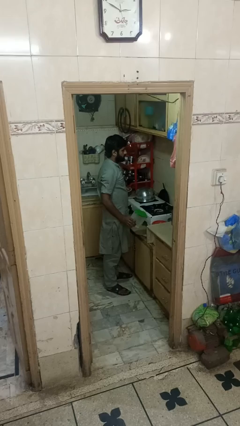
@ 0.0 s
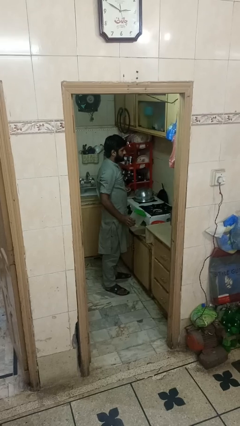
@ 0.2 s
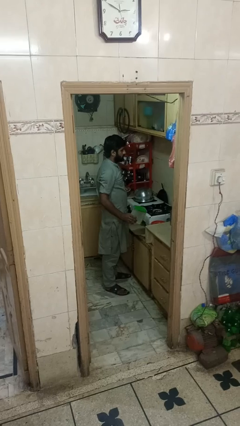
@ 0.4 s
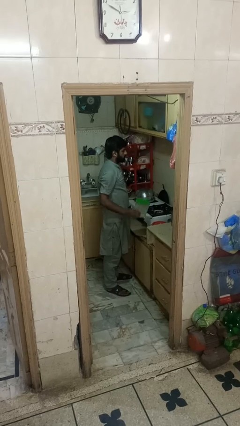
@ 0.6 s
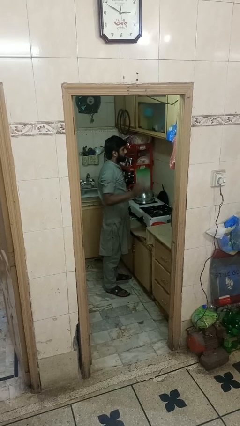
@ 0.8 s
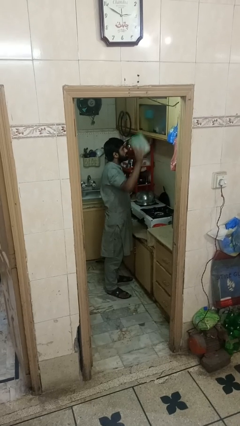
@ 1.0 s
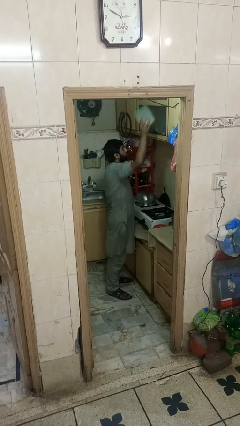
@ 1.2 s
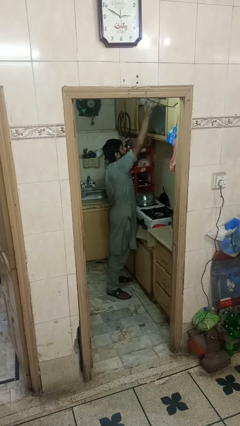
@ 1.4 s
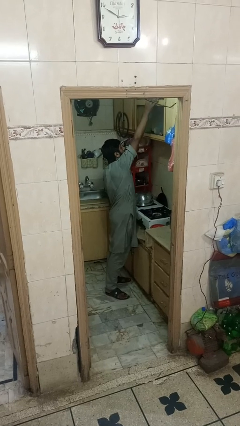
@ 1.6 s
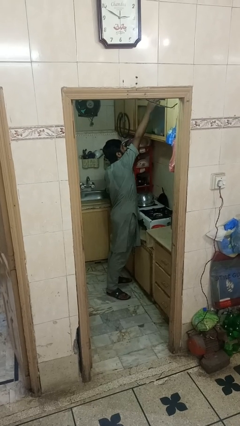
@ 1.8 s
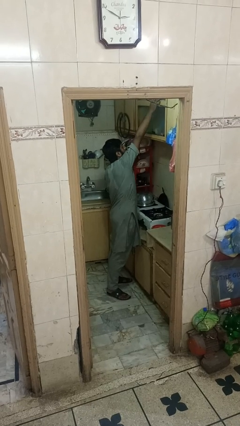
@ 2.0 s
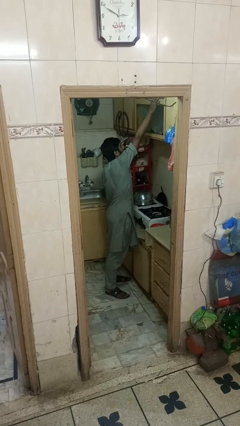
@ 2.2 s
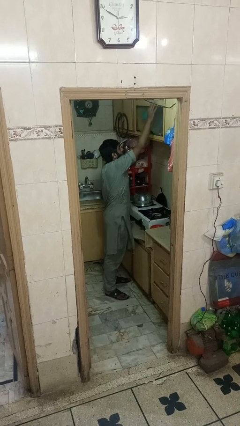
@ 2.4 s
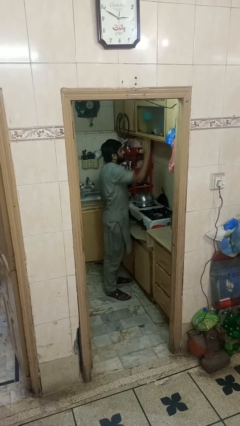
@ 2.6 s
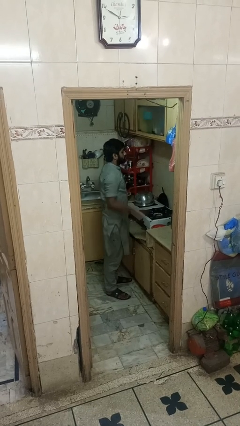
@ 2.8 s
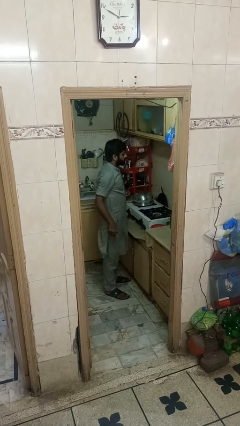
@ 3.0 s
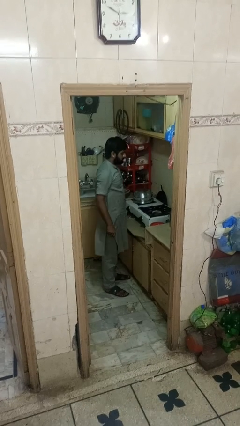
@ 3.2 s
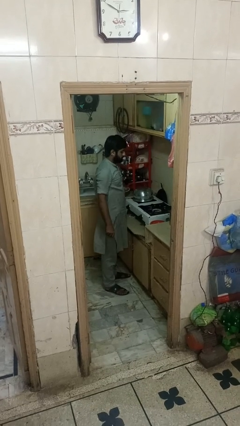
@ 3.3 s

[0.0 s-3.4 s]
person puts down object on shelf

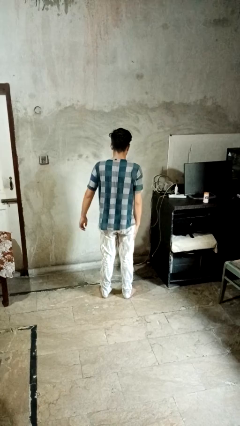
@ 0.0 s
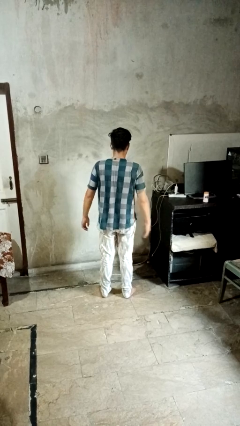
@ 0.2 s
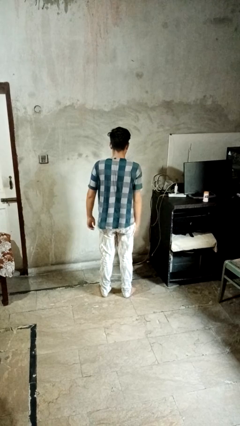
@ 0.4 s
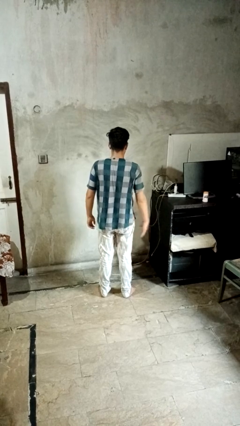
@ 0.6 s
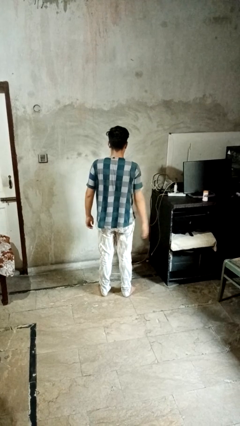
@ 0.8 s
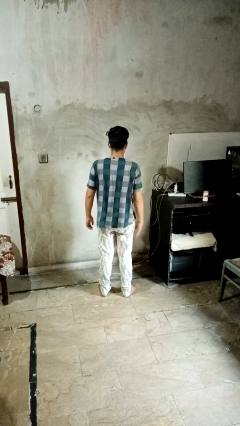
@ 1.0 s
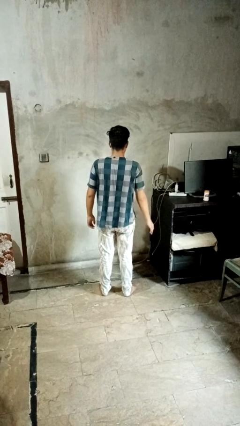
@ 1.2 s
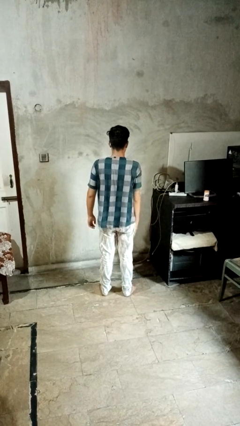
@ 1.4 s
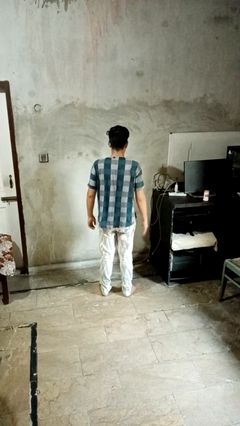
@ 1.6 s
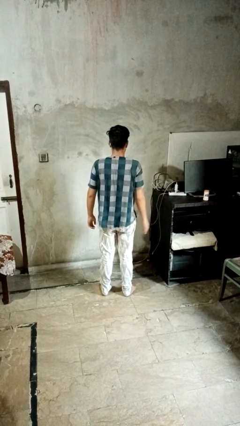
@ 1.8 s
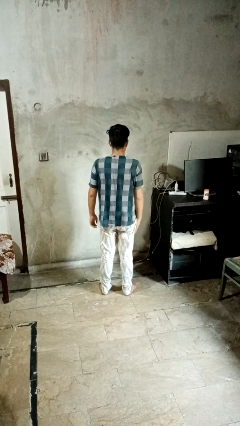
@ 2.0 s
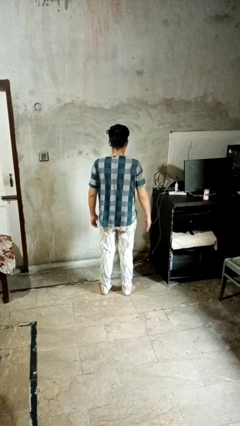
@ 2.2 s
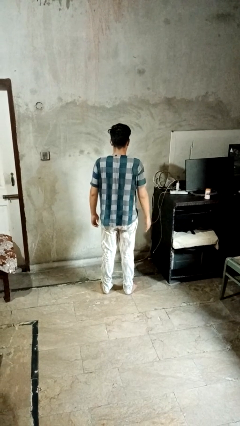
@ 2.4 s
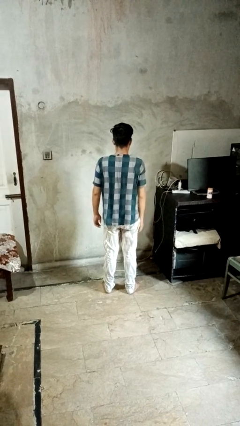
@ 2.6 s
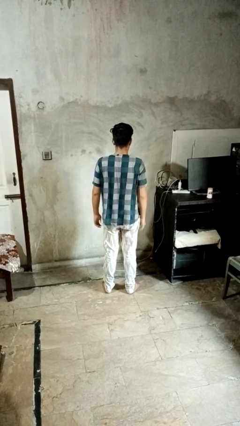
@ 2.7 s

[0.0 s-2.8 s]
person slaps hands on thighs

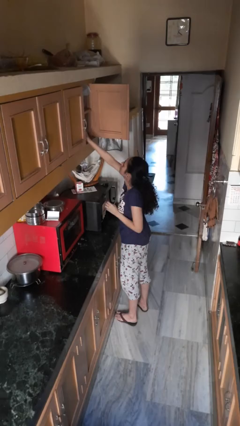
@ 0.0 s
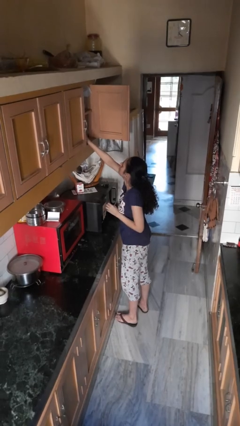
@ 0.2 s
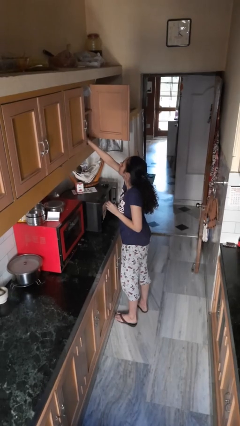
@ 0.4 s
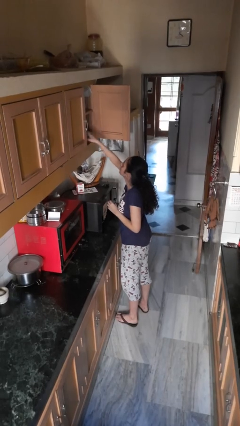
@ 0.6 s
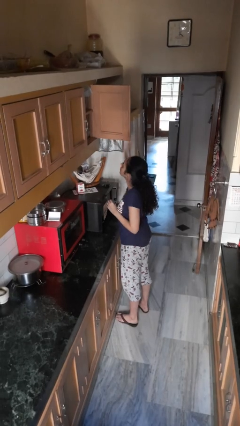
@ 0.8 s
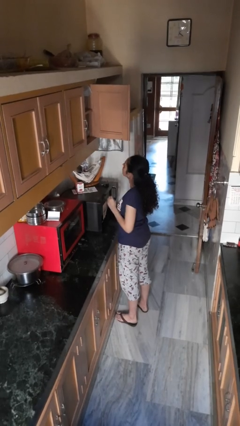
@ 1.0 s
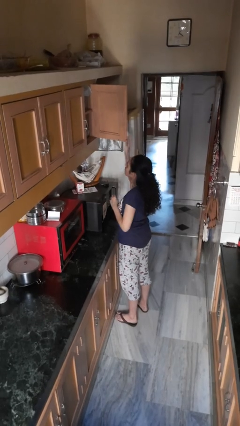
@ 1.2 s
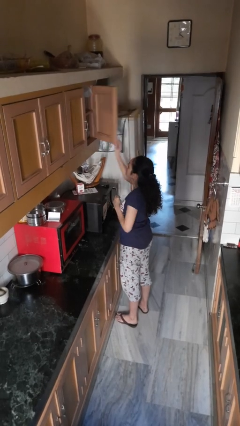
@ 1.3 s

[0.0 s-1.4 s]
person puts object in cabinet

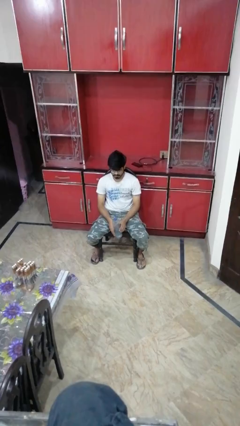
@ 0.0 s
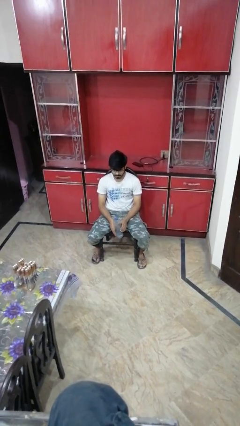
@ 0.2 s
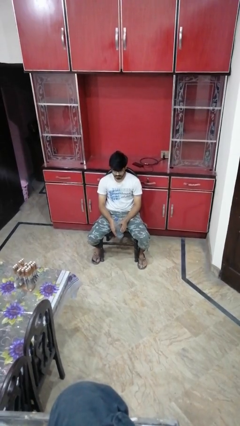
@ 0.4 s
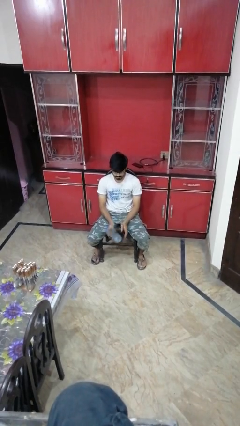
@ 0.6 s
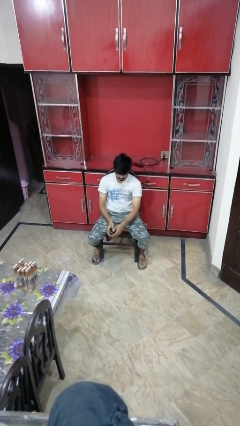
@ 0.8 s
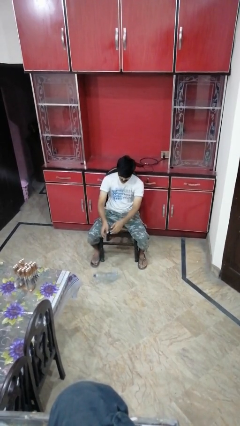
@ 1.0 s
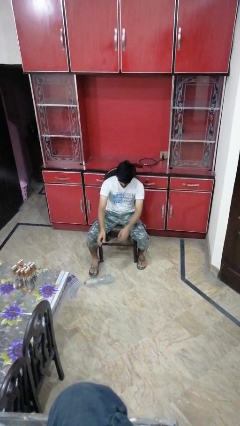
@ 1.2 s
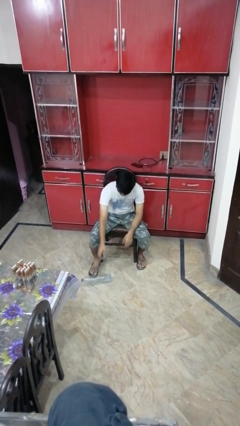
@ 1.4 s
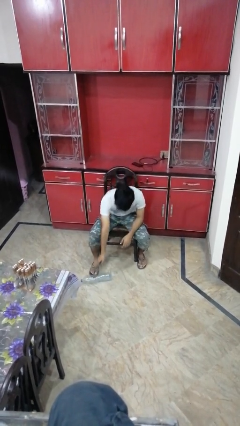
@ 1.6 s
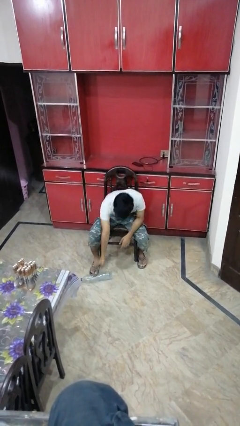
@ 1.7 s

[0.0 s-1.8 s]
person drops object

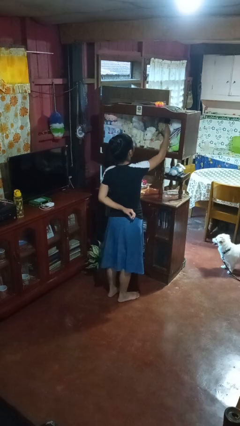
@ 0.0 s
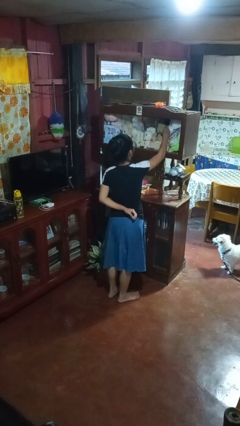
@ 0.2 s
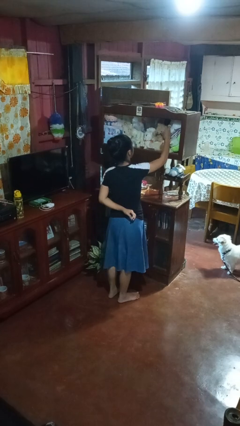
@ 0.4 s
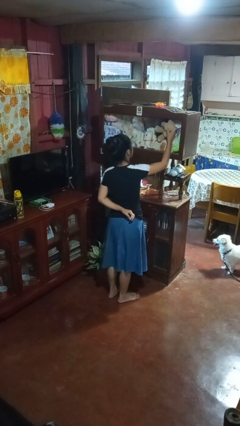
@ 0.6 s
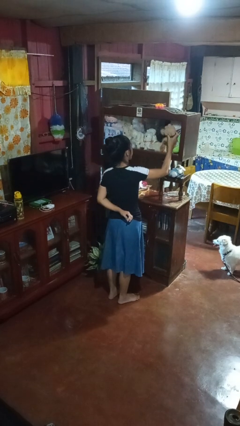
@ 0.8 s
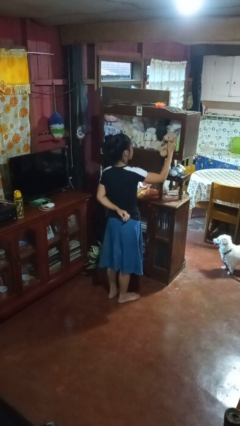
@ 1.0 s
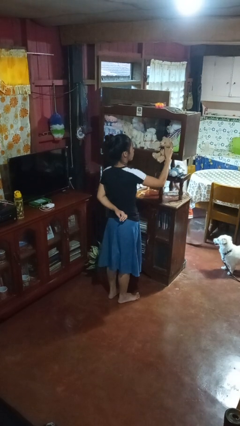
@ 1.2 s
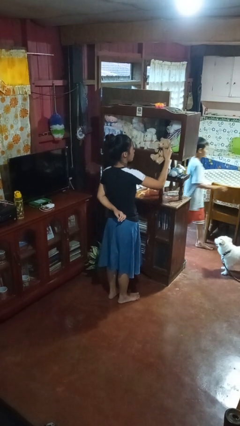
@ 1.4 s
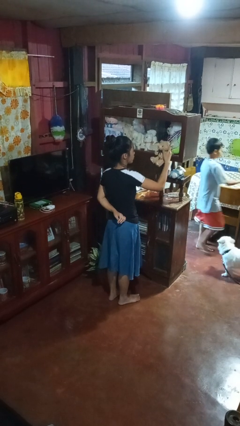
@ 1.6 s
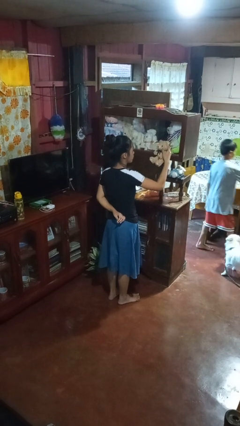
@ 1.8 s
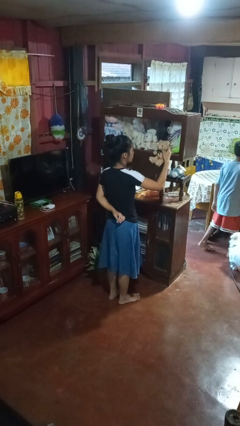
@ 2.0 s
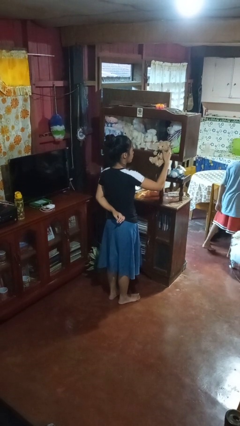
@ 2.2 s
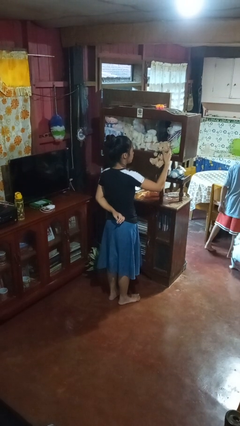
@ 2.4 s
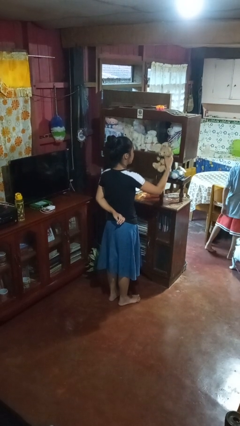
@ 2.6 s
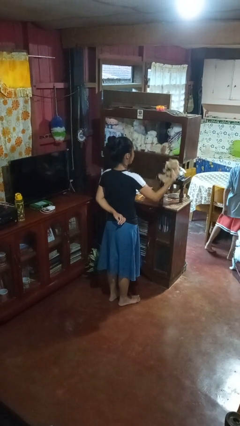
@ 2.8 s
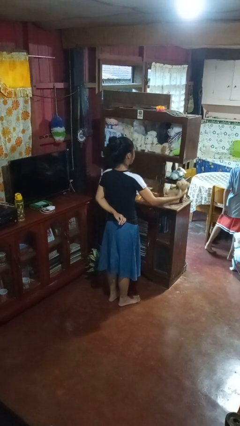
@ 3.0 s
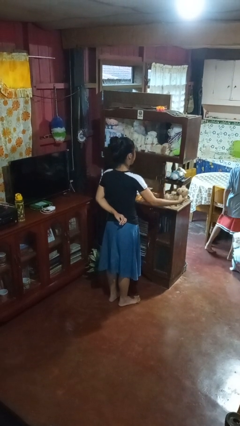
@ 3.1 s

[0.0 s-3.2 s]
person picks up object from shelf

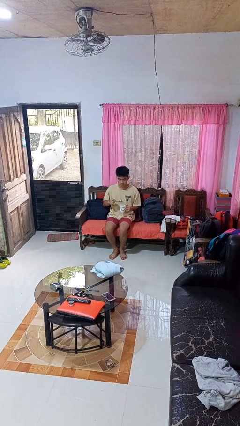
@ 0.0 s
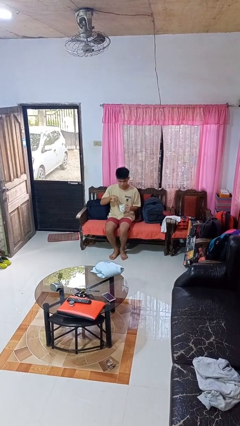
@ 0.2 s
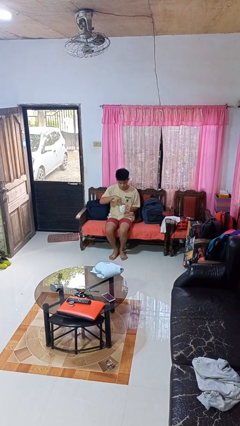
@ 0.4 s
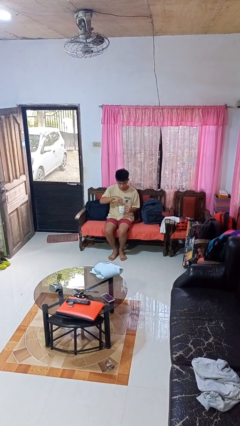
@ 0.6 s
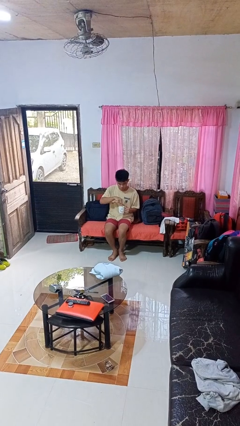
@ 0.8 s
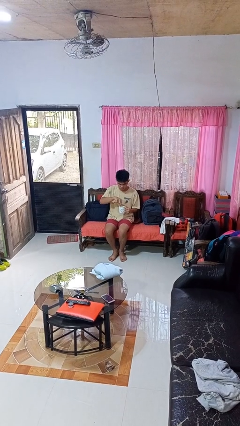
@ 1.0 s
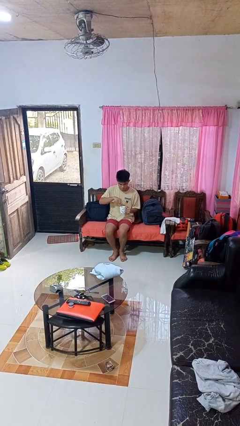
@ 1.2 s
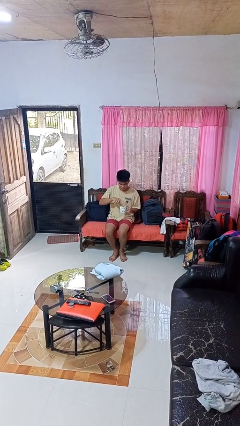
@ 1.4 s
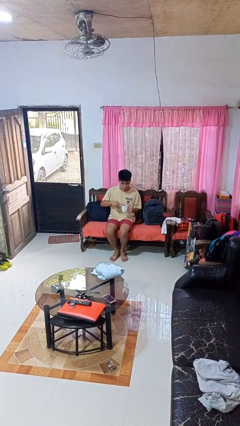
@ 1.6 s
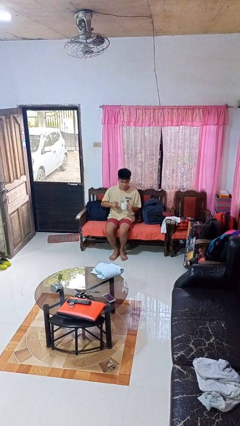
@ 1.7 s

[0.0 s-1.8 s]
person stirs mug

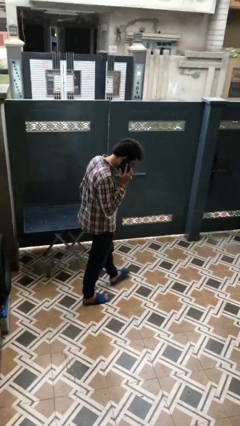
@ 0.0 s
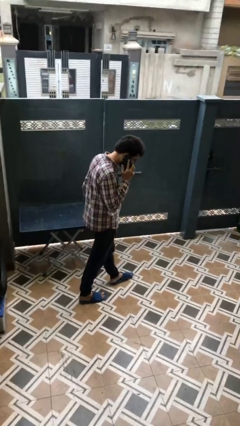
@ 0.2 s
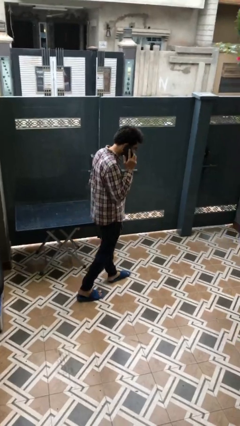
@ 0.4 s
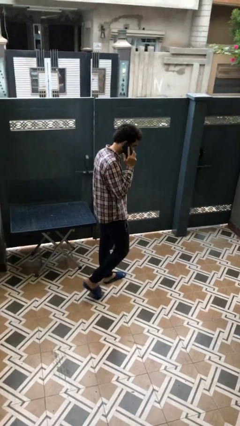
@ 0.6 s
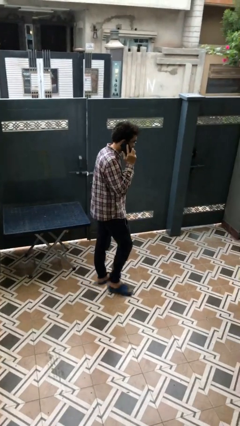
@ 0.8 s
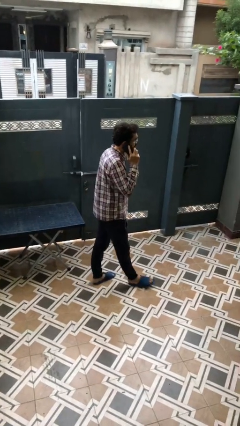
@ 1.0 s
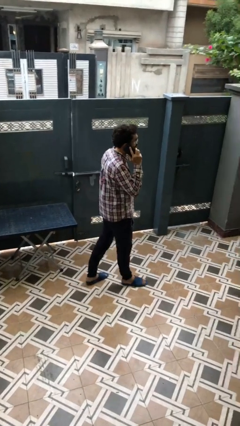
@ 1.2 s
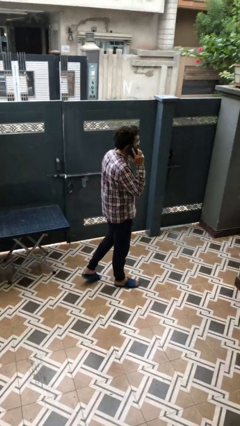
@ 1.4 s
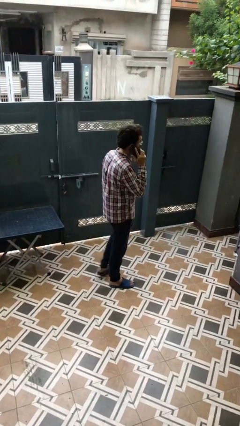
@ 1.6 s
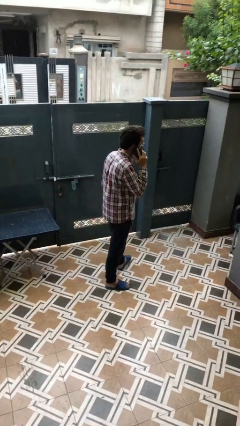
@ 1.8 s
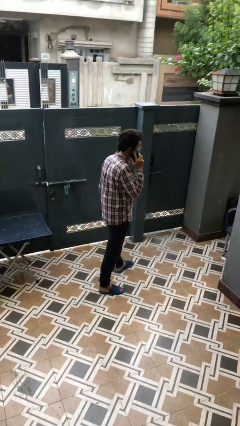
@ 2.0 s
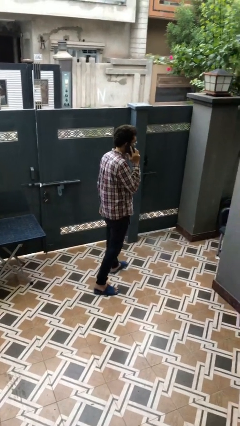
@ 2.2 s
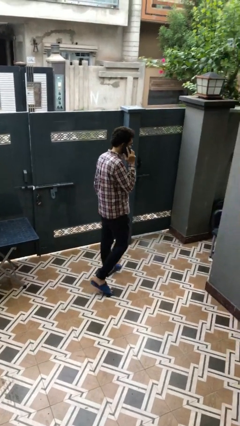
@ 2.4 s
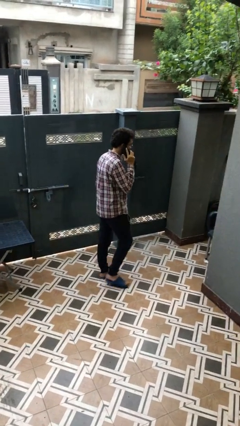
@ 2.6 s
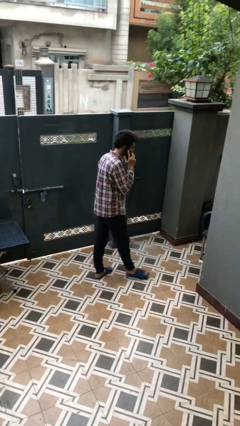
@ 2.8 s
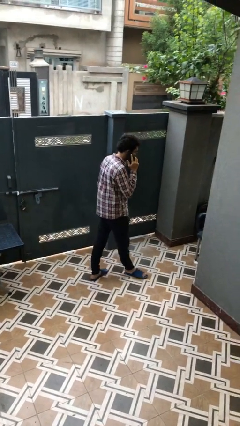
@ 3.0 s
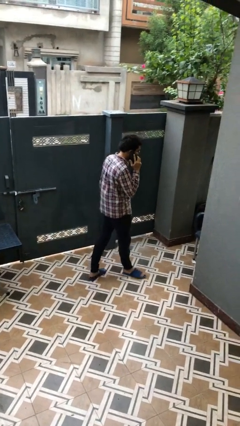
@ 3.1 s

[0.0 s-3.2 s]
person talks on phone
